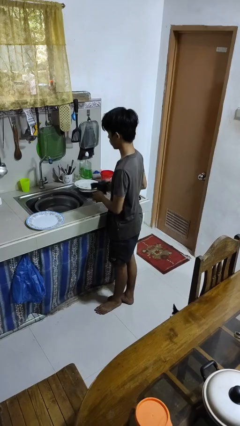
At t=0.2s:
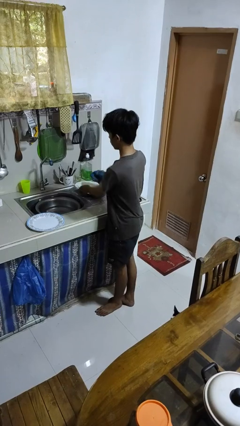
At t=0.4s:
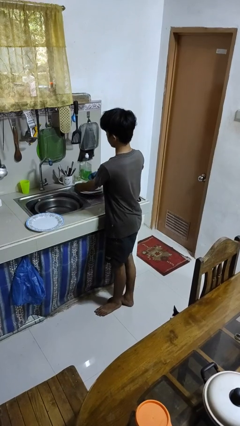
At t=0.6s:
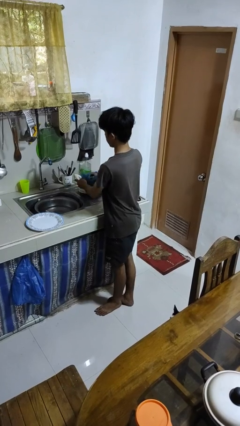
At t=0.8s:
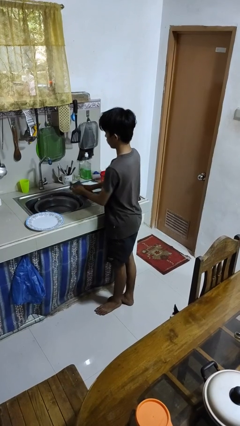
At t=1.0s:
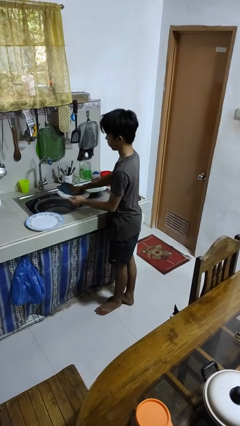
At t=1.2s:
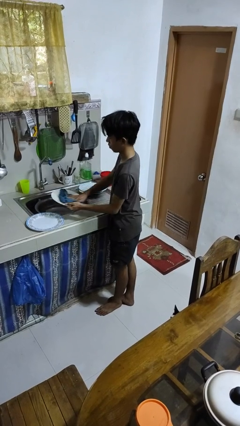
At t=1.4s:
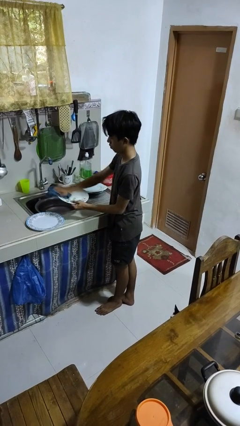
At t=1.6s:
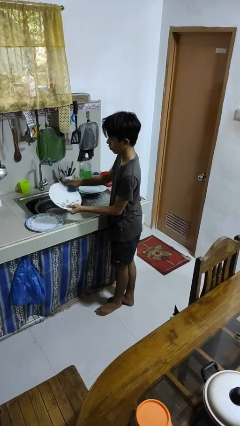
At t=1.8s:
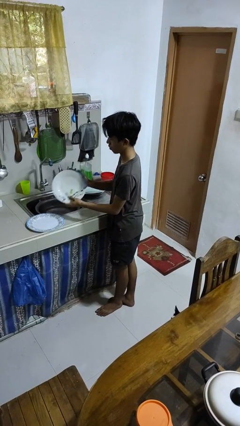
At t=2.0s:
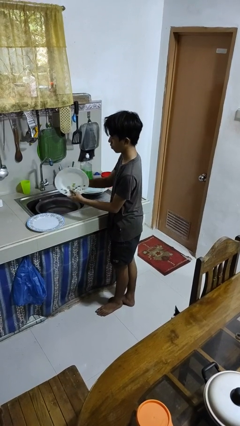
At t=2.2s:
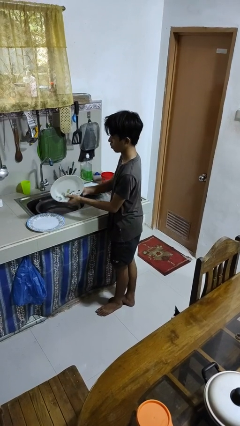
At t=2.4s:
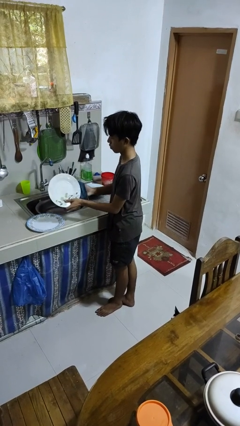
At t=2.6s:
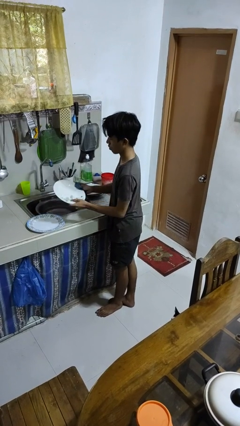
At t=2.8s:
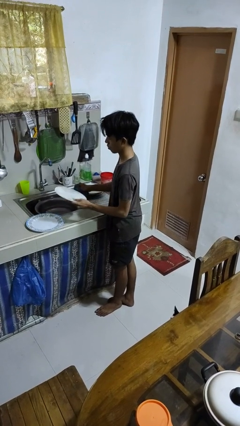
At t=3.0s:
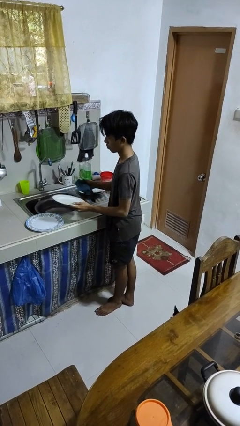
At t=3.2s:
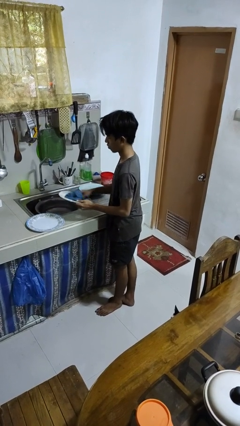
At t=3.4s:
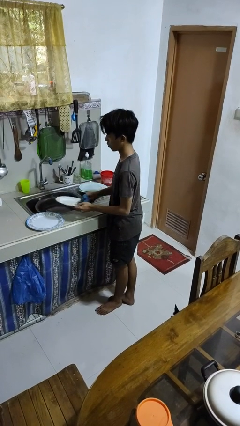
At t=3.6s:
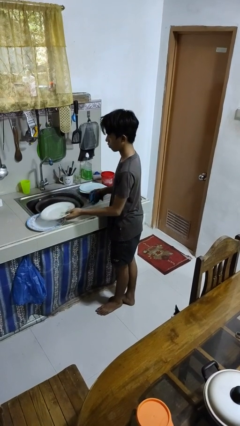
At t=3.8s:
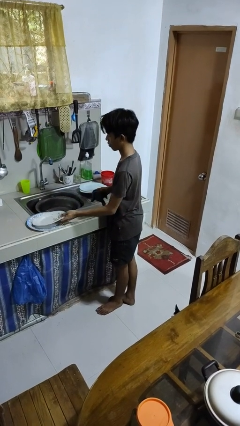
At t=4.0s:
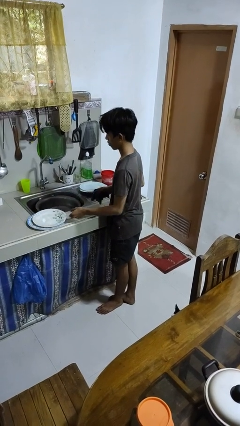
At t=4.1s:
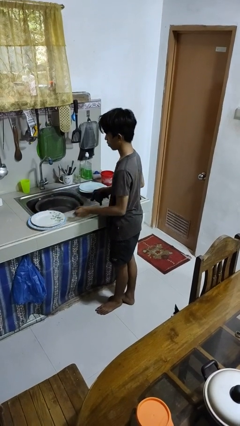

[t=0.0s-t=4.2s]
person dries dish

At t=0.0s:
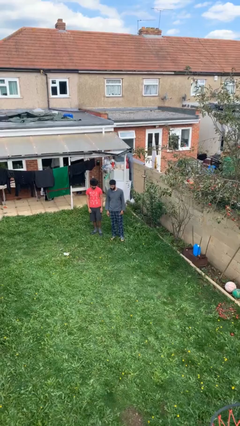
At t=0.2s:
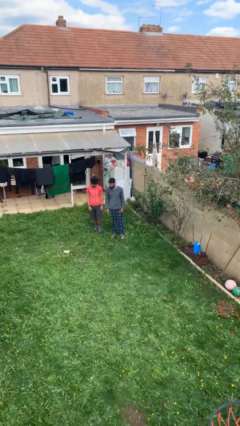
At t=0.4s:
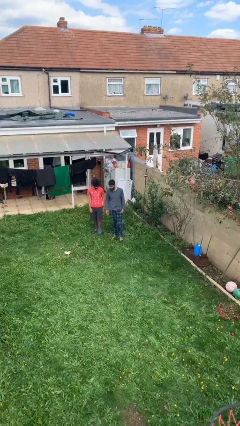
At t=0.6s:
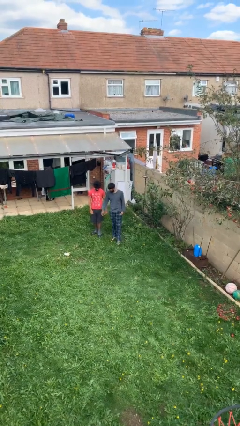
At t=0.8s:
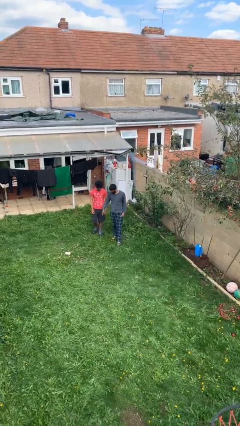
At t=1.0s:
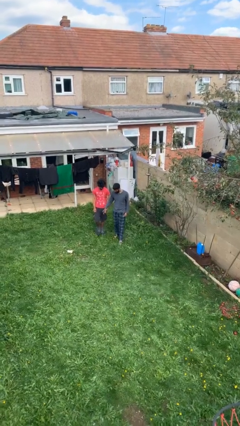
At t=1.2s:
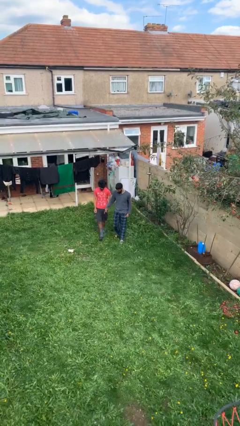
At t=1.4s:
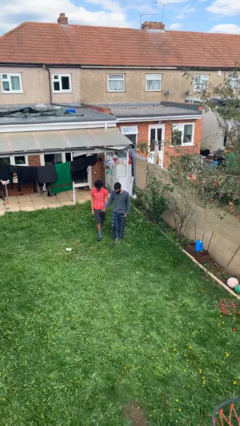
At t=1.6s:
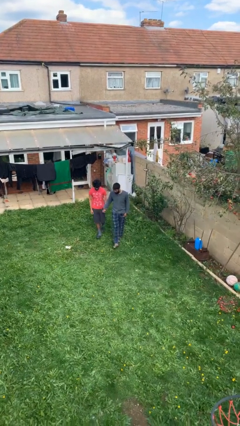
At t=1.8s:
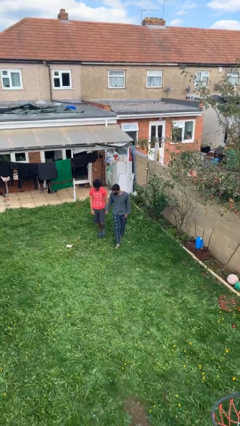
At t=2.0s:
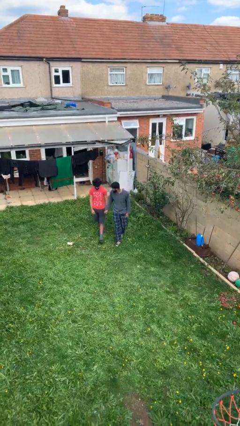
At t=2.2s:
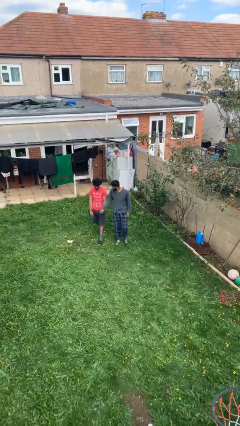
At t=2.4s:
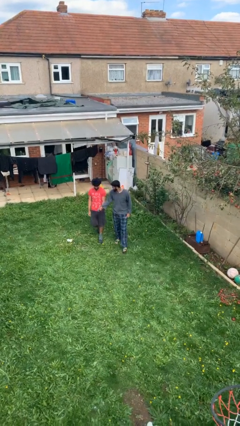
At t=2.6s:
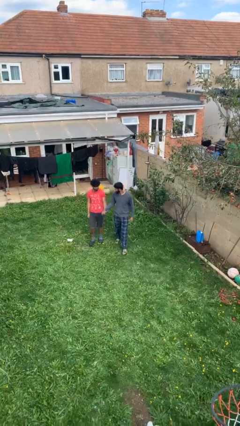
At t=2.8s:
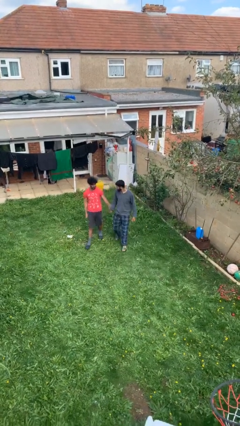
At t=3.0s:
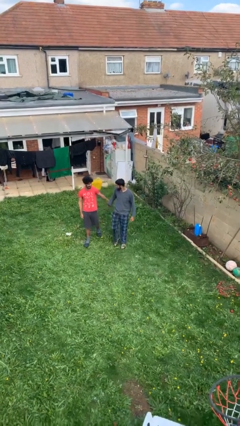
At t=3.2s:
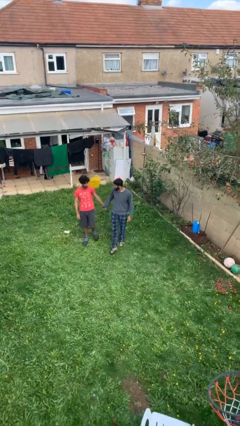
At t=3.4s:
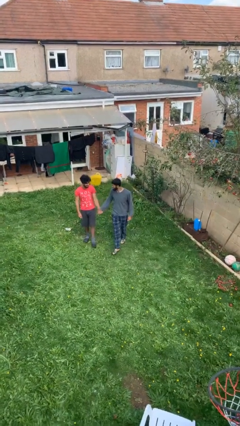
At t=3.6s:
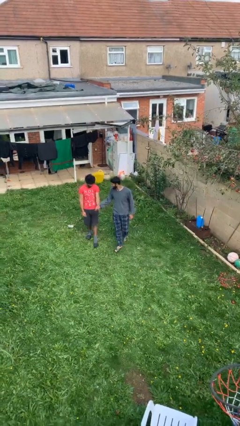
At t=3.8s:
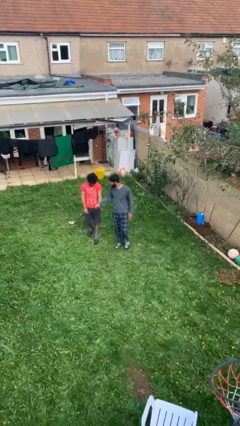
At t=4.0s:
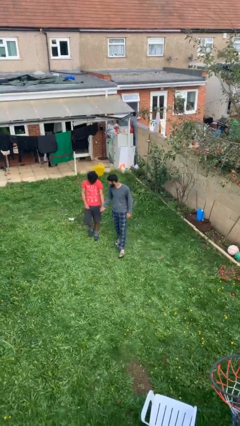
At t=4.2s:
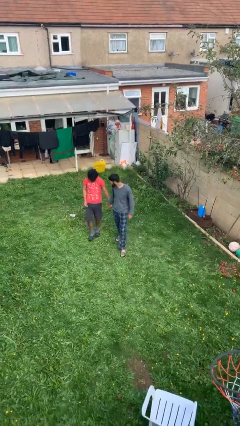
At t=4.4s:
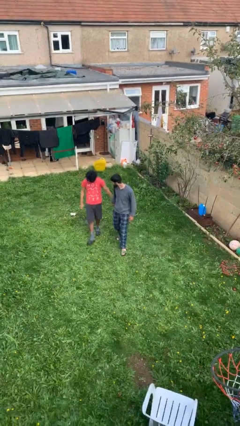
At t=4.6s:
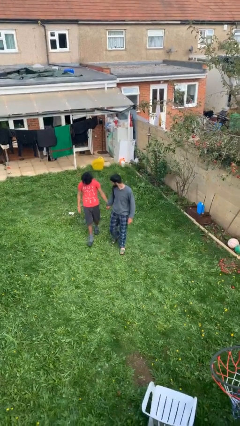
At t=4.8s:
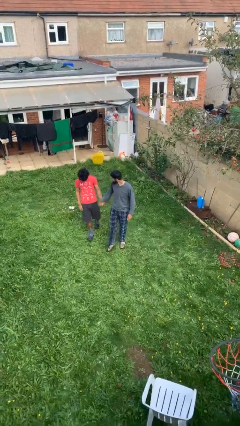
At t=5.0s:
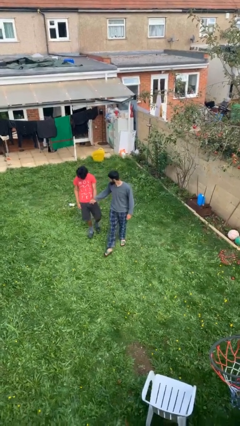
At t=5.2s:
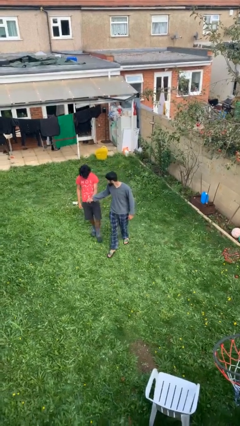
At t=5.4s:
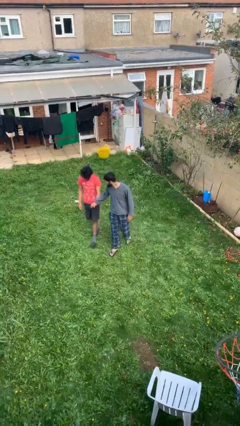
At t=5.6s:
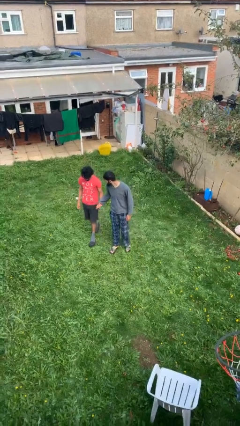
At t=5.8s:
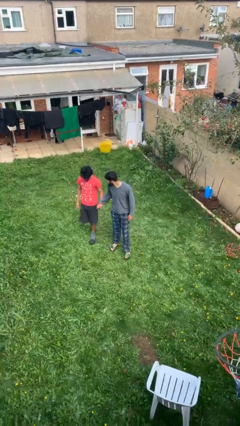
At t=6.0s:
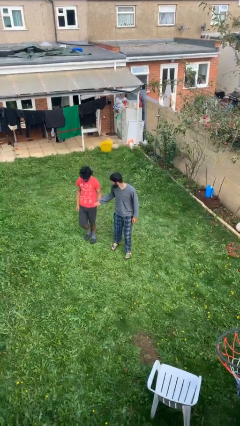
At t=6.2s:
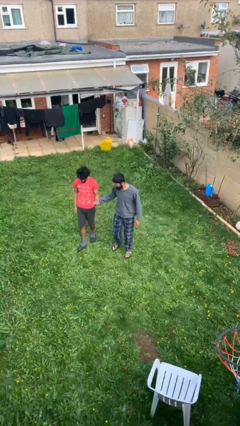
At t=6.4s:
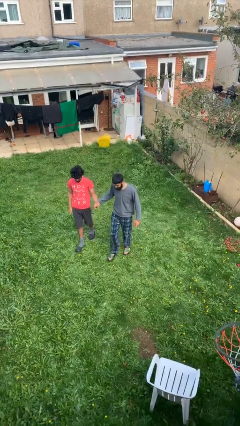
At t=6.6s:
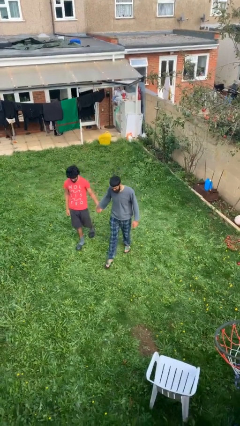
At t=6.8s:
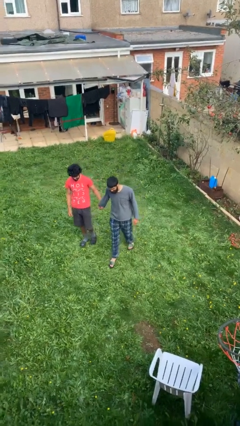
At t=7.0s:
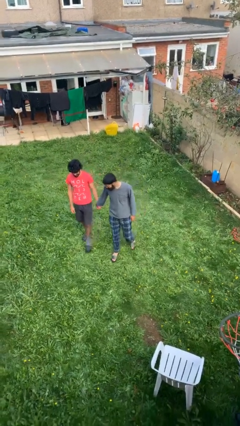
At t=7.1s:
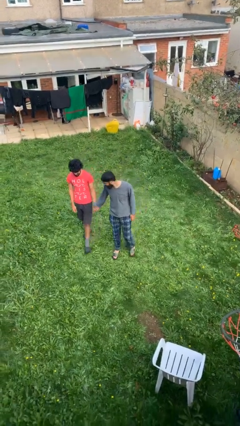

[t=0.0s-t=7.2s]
person holds hand

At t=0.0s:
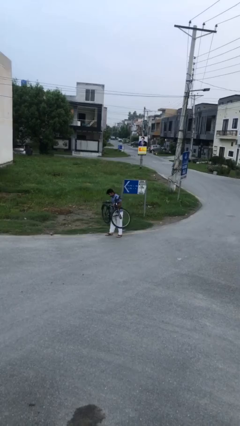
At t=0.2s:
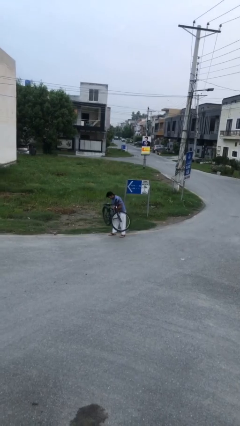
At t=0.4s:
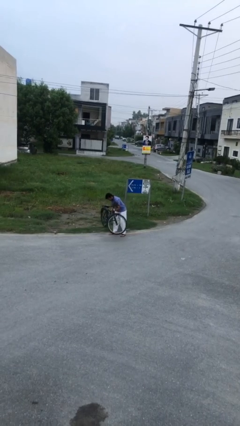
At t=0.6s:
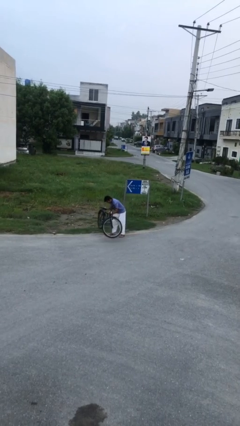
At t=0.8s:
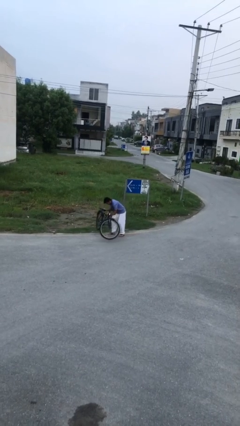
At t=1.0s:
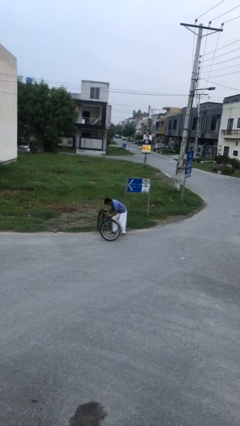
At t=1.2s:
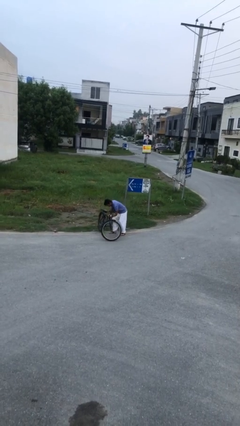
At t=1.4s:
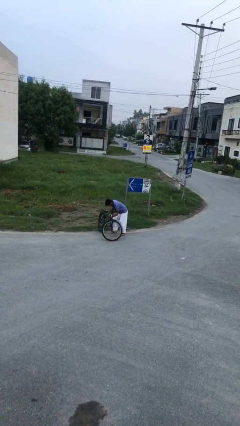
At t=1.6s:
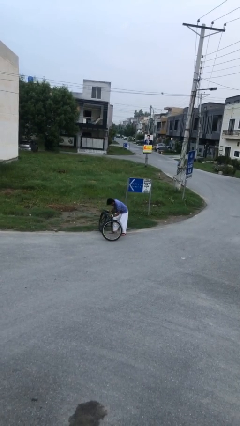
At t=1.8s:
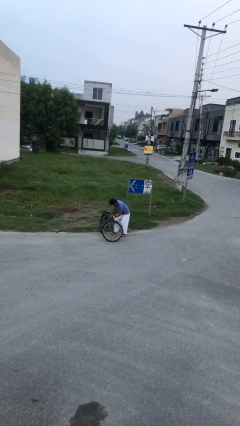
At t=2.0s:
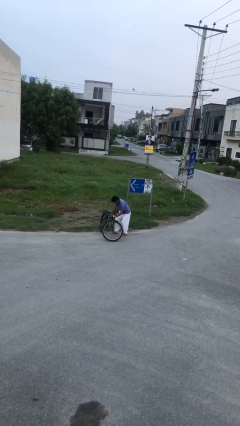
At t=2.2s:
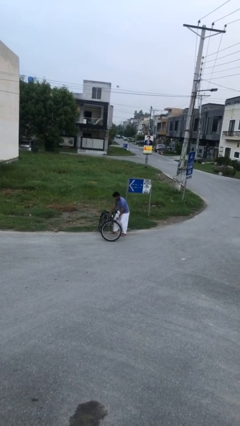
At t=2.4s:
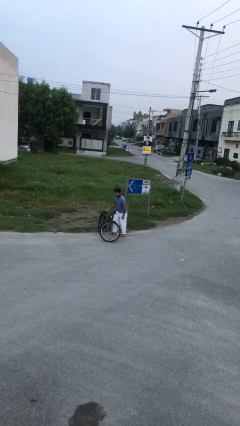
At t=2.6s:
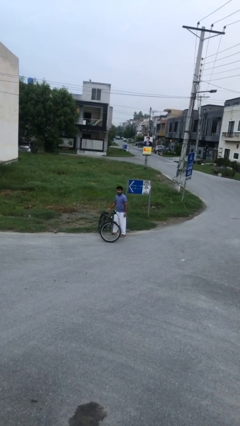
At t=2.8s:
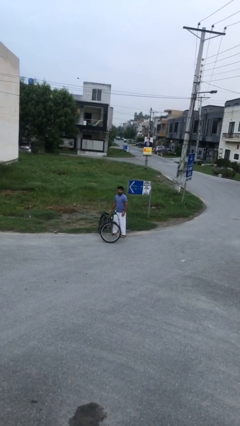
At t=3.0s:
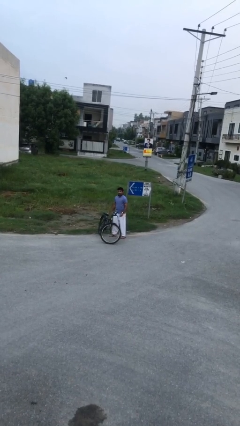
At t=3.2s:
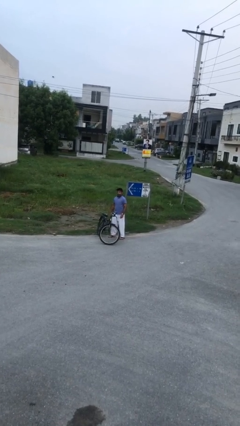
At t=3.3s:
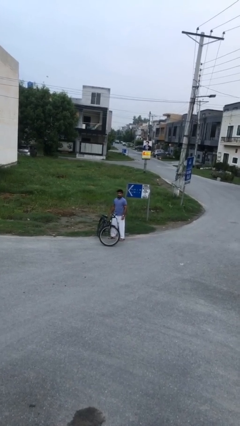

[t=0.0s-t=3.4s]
person puts down object on floor

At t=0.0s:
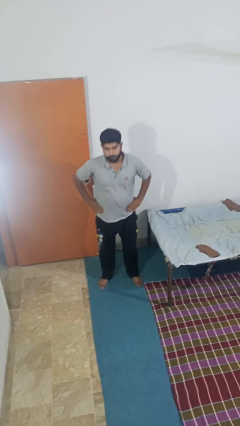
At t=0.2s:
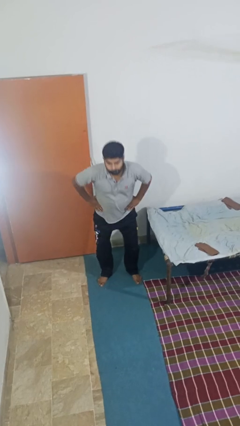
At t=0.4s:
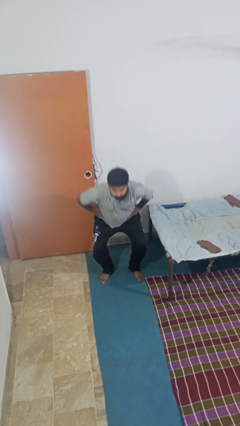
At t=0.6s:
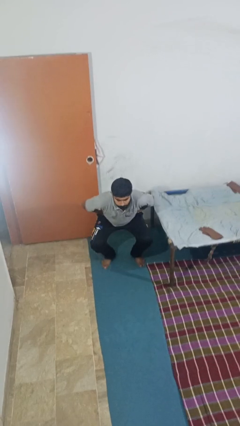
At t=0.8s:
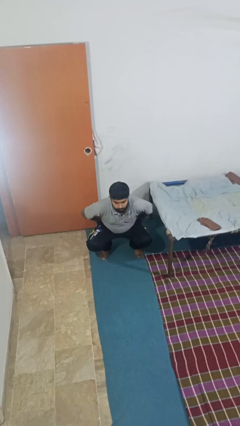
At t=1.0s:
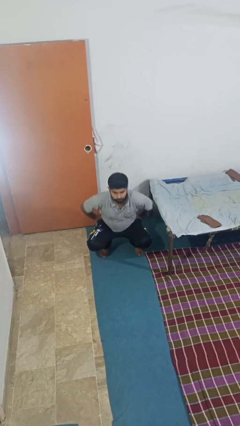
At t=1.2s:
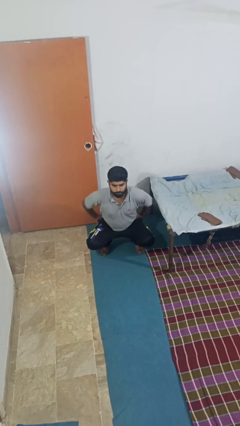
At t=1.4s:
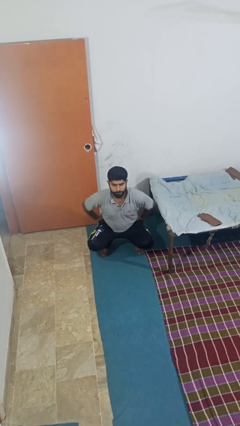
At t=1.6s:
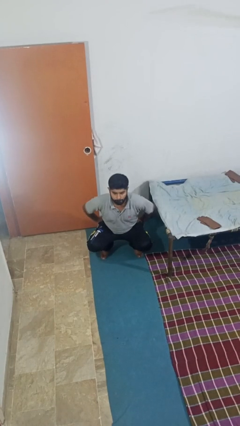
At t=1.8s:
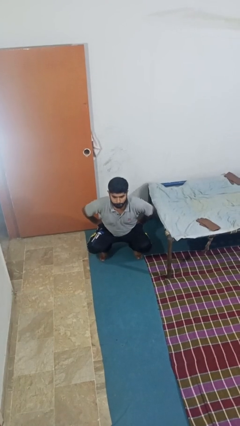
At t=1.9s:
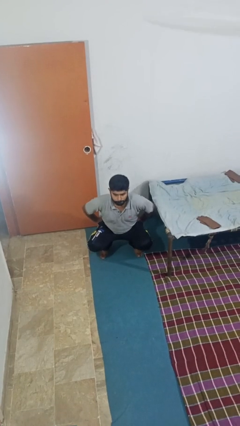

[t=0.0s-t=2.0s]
person squats

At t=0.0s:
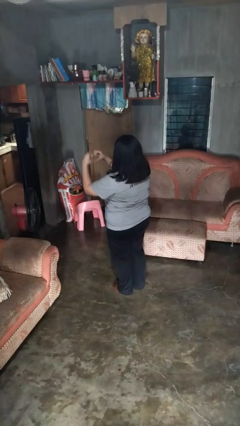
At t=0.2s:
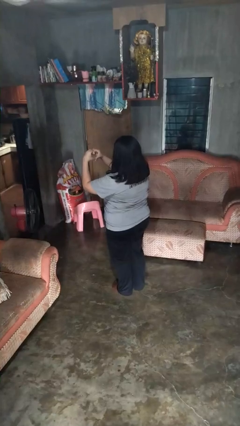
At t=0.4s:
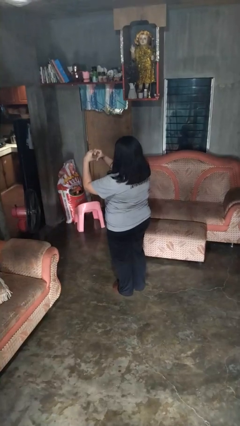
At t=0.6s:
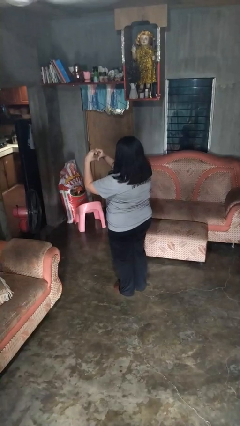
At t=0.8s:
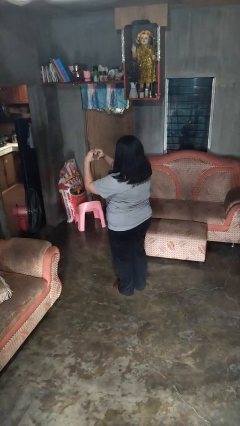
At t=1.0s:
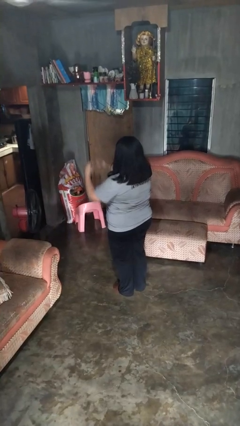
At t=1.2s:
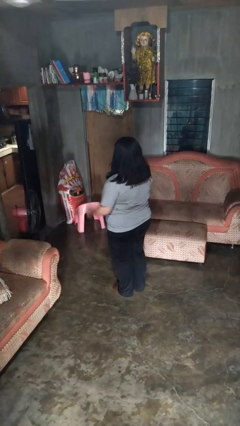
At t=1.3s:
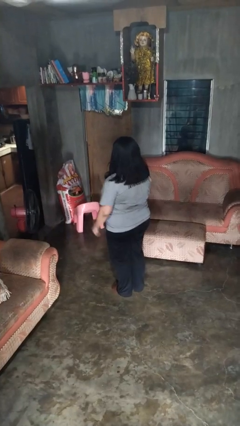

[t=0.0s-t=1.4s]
person gestures heart
